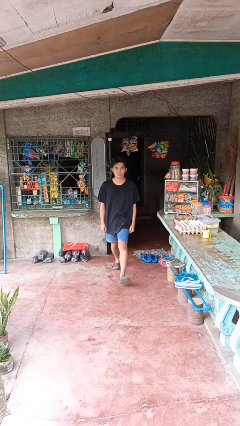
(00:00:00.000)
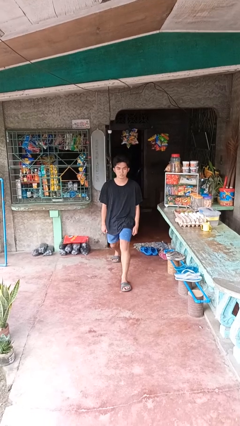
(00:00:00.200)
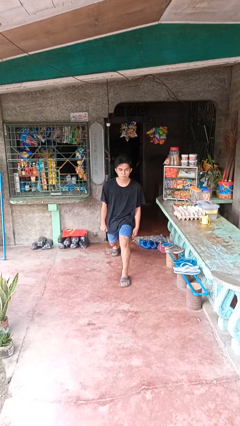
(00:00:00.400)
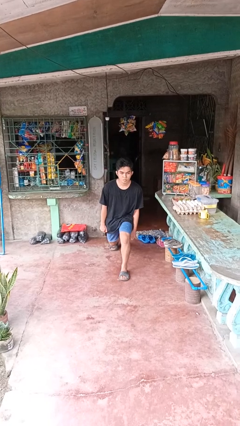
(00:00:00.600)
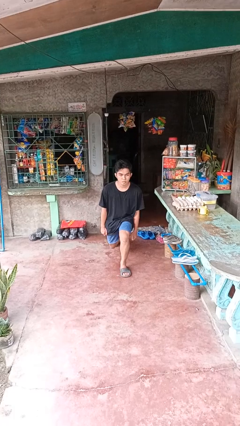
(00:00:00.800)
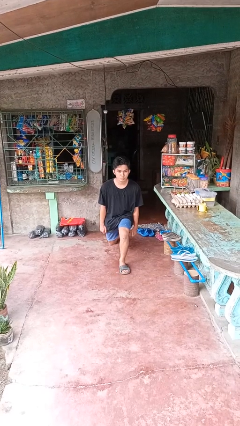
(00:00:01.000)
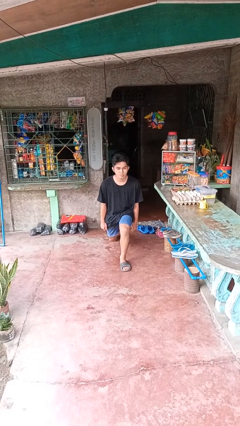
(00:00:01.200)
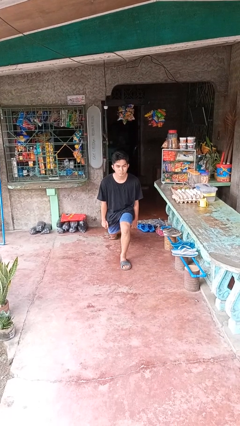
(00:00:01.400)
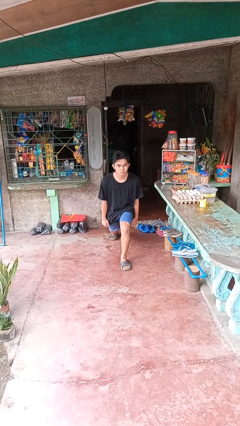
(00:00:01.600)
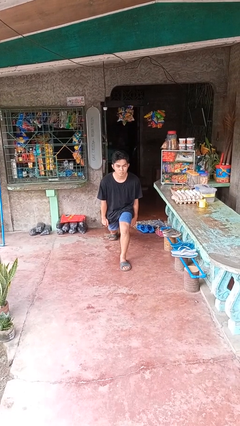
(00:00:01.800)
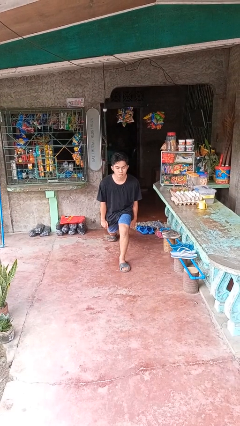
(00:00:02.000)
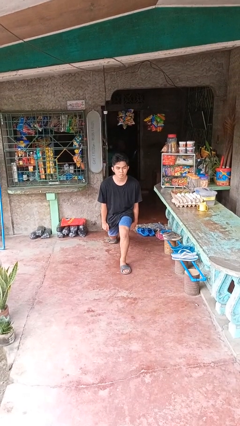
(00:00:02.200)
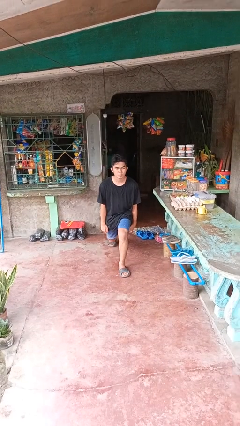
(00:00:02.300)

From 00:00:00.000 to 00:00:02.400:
person exercises with lunges

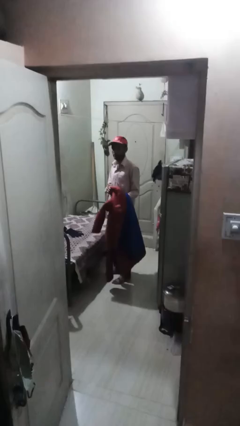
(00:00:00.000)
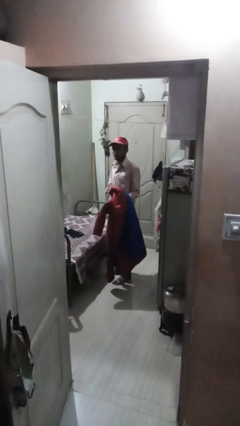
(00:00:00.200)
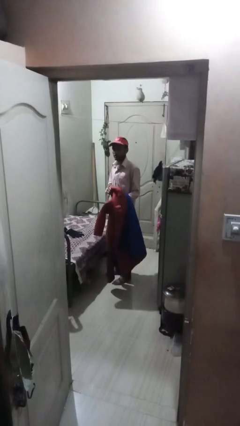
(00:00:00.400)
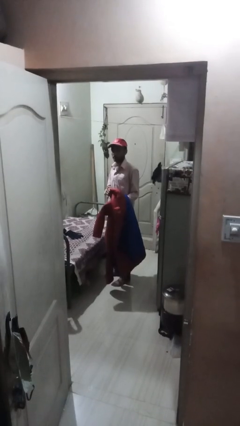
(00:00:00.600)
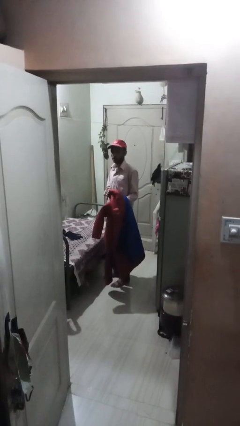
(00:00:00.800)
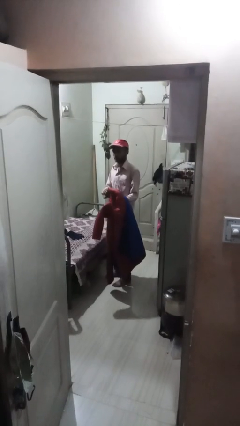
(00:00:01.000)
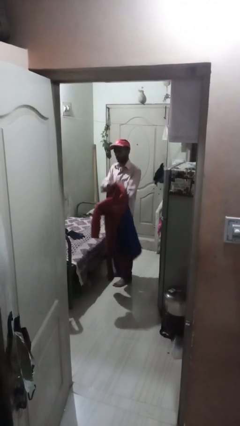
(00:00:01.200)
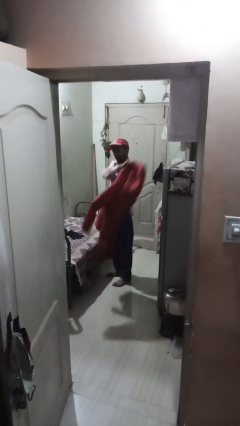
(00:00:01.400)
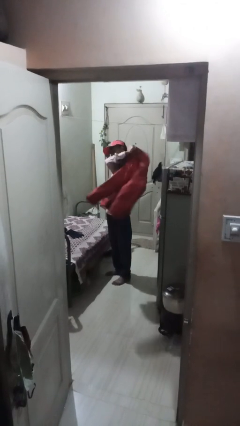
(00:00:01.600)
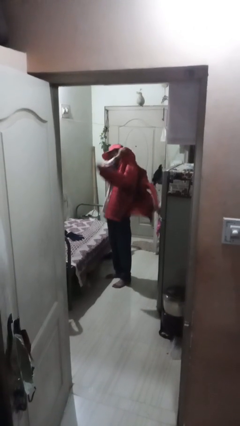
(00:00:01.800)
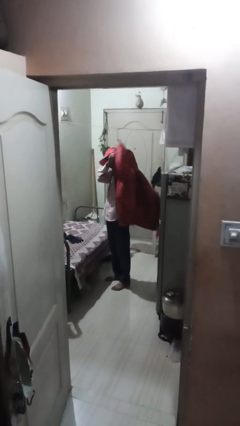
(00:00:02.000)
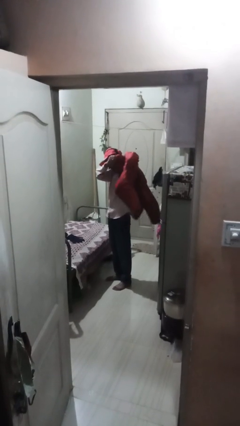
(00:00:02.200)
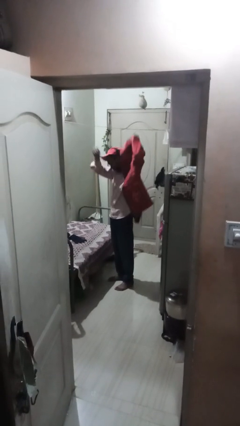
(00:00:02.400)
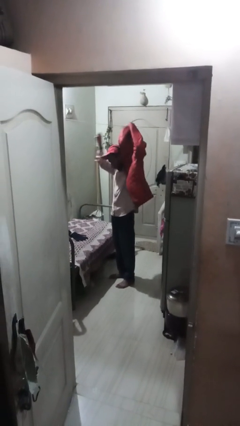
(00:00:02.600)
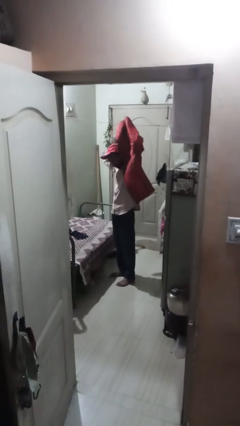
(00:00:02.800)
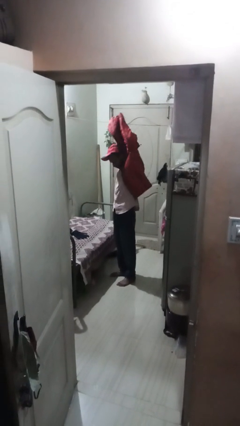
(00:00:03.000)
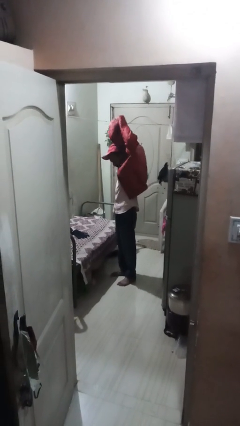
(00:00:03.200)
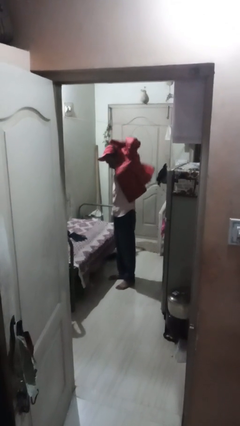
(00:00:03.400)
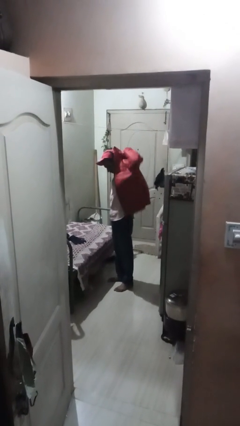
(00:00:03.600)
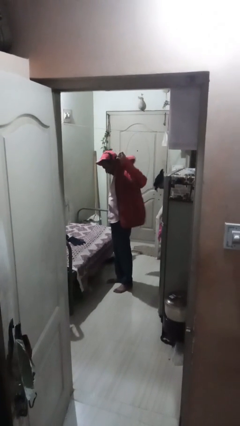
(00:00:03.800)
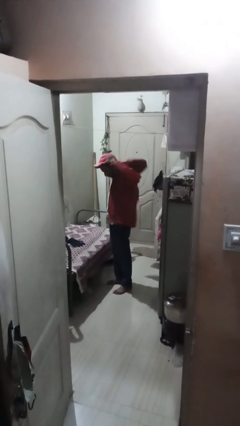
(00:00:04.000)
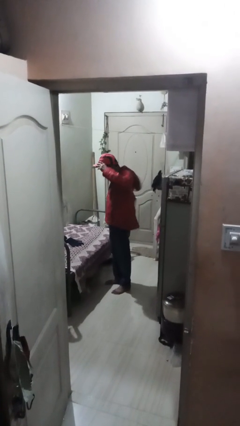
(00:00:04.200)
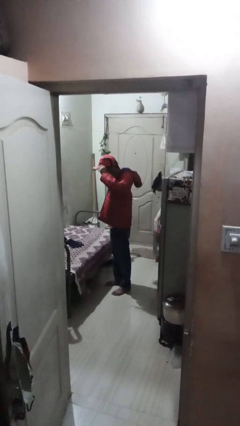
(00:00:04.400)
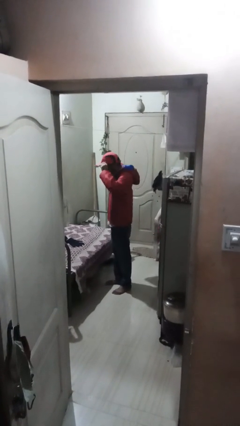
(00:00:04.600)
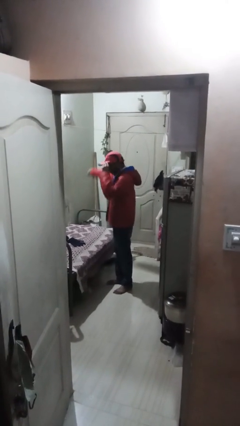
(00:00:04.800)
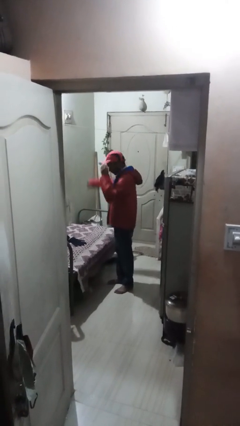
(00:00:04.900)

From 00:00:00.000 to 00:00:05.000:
person puts on jacket

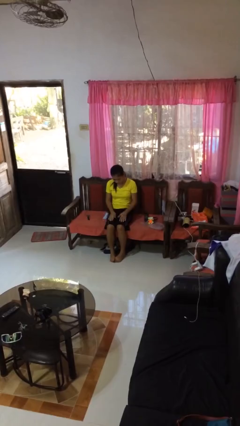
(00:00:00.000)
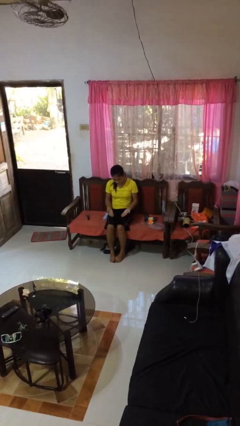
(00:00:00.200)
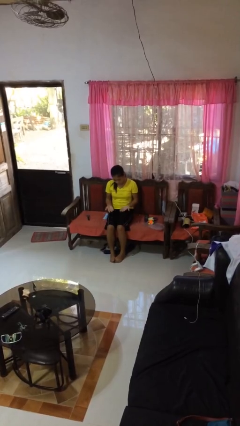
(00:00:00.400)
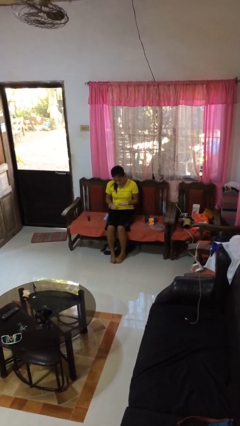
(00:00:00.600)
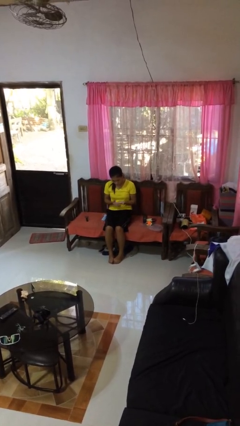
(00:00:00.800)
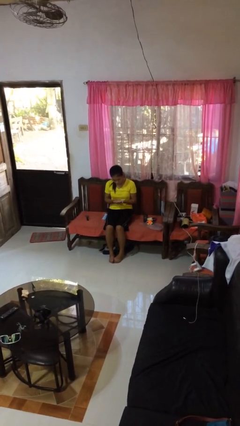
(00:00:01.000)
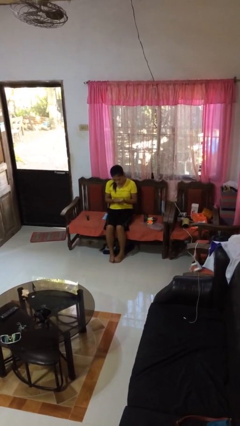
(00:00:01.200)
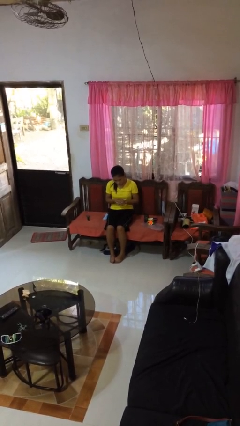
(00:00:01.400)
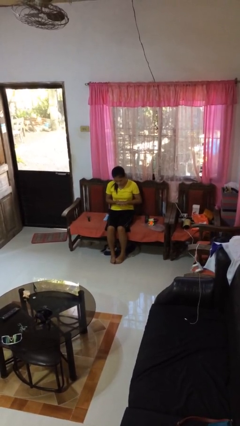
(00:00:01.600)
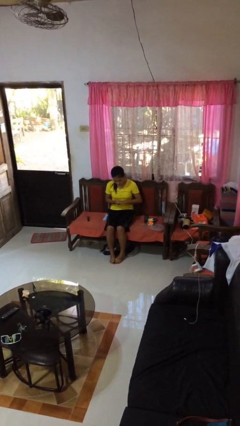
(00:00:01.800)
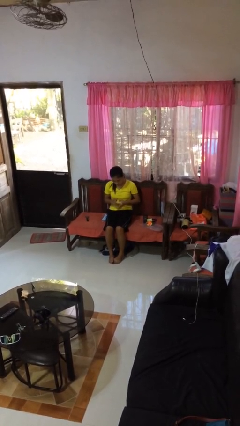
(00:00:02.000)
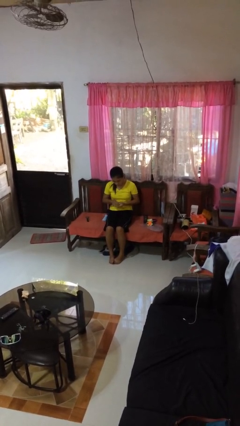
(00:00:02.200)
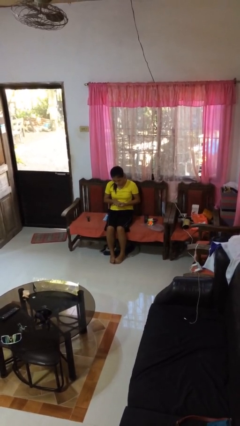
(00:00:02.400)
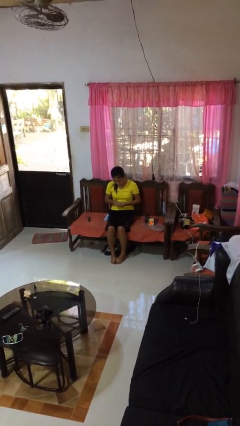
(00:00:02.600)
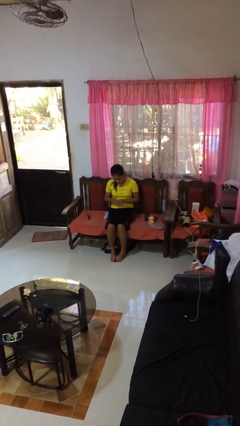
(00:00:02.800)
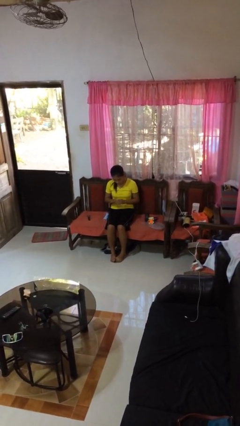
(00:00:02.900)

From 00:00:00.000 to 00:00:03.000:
person looks at hands in lap

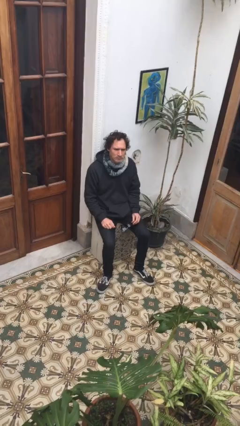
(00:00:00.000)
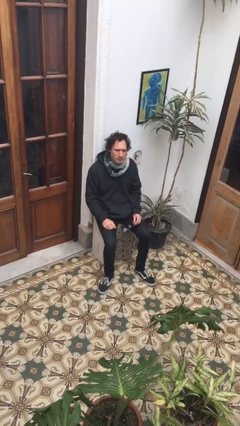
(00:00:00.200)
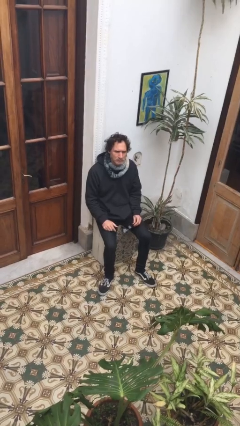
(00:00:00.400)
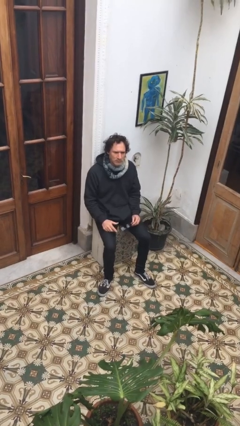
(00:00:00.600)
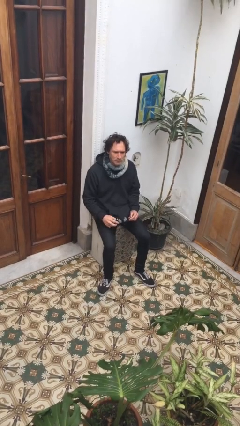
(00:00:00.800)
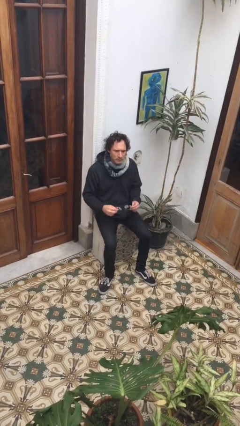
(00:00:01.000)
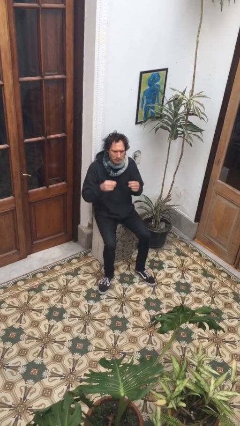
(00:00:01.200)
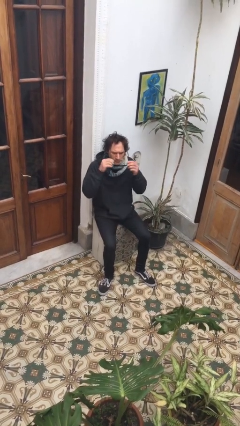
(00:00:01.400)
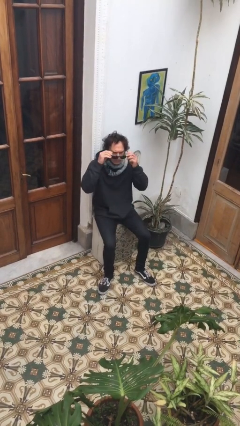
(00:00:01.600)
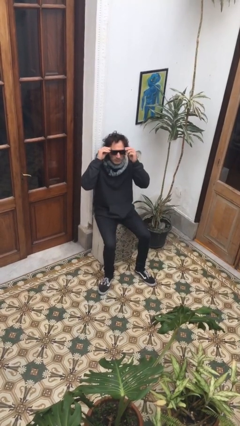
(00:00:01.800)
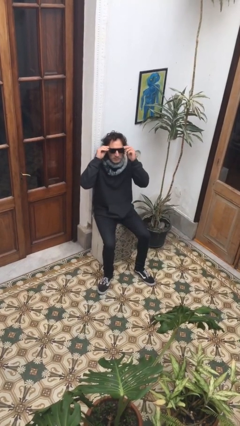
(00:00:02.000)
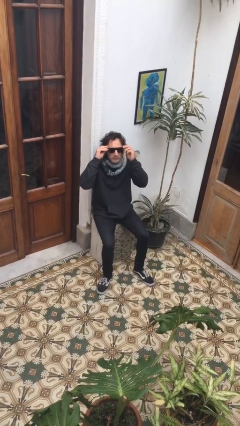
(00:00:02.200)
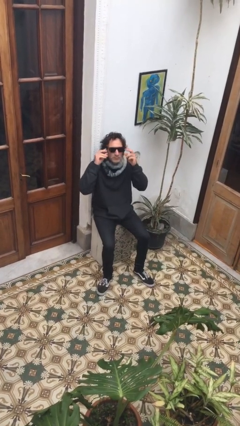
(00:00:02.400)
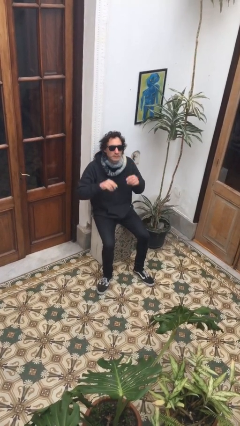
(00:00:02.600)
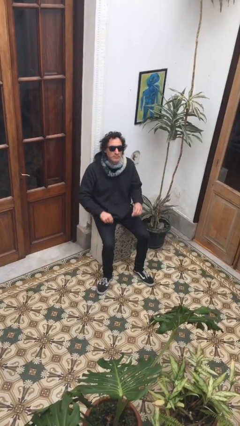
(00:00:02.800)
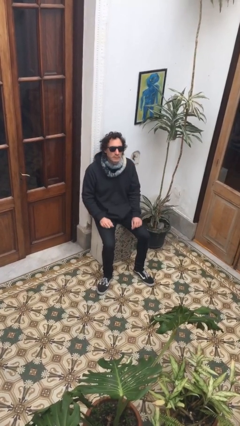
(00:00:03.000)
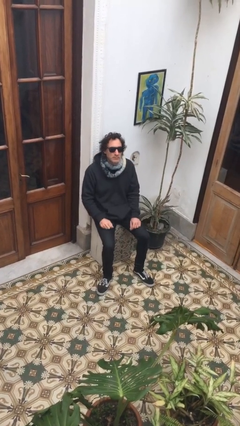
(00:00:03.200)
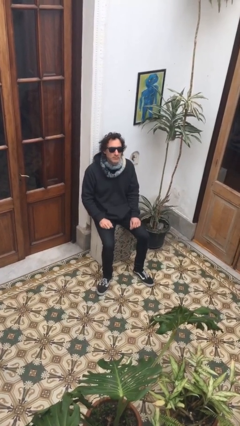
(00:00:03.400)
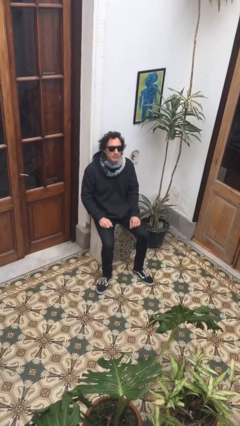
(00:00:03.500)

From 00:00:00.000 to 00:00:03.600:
person puts on sunglasses

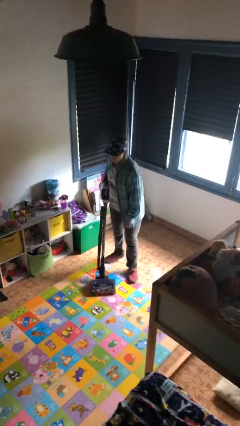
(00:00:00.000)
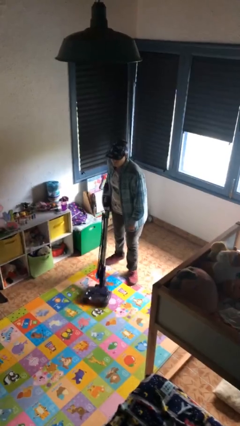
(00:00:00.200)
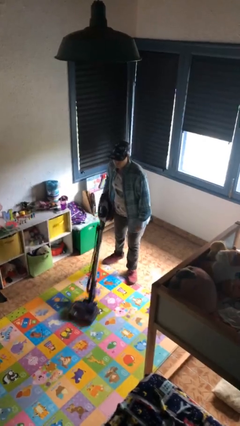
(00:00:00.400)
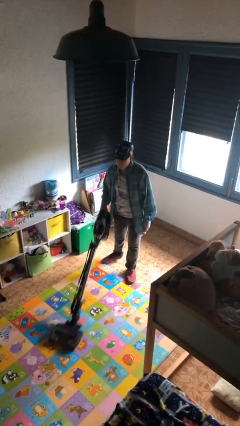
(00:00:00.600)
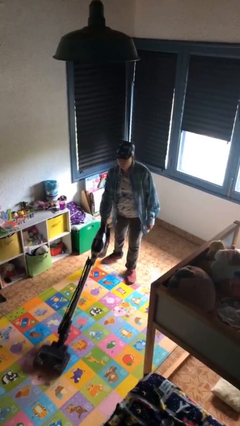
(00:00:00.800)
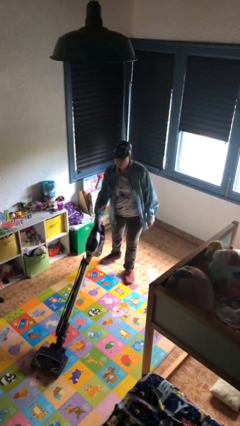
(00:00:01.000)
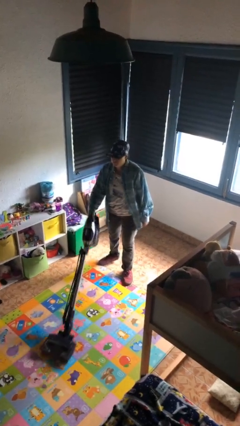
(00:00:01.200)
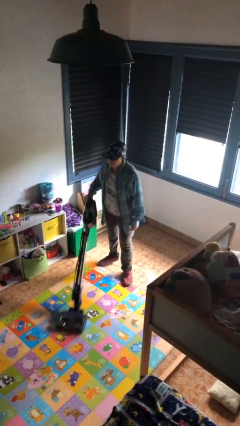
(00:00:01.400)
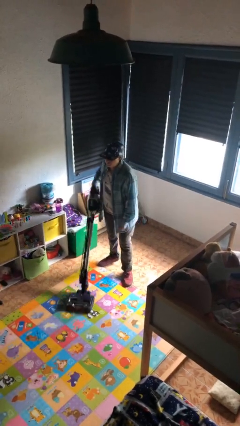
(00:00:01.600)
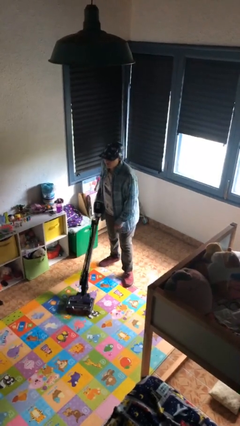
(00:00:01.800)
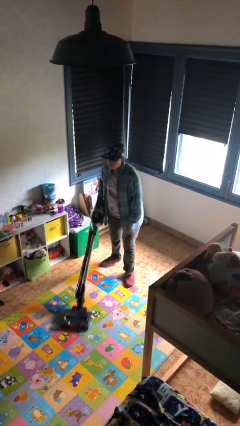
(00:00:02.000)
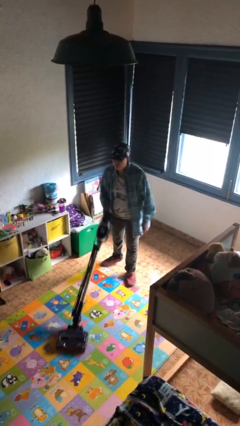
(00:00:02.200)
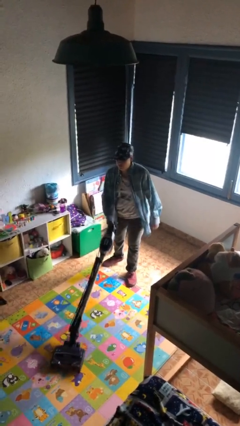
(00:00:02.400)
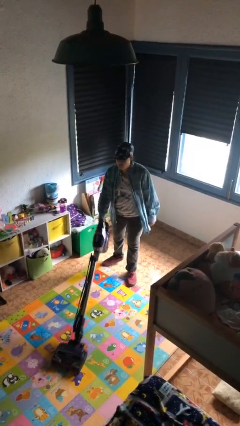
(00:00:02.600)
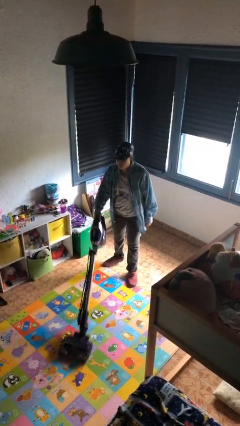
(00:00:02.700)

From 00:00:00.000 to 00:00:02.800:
person vacuums carpet

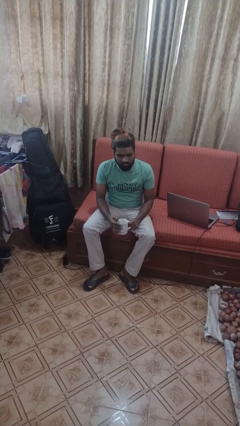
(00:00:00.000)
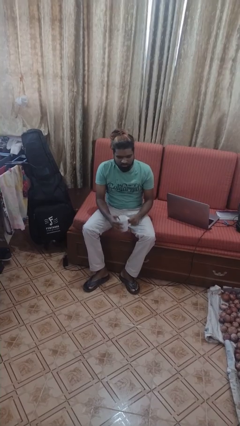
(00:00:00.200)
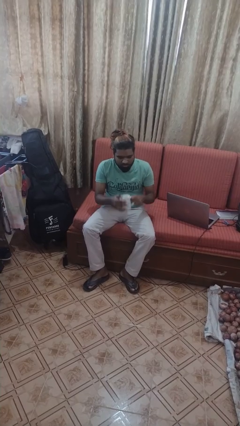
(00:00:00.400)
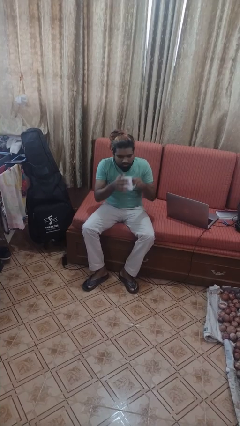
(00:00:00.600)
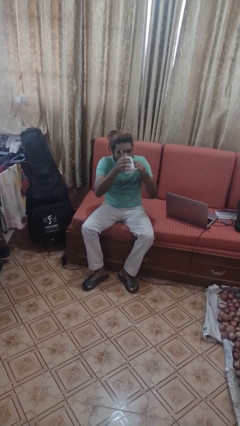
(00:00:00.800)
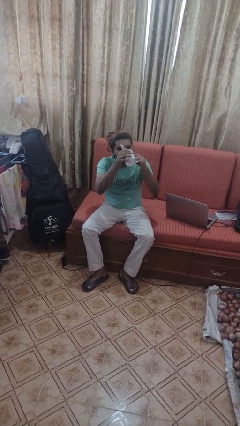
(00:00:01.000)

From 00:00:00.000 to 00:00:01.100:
person drinks from mug
